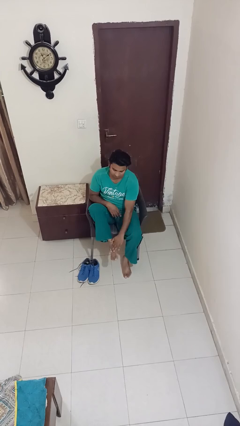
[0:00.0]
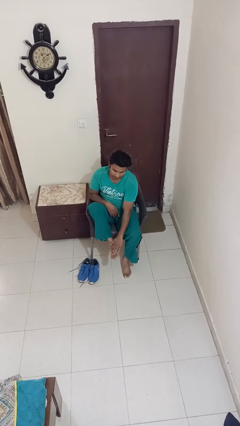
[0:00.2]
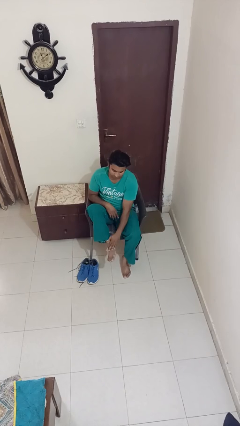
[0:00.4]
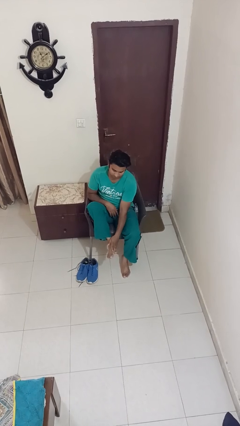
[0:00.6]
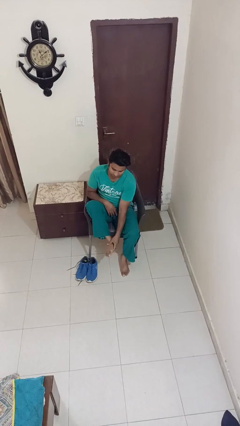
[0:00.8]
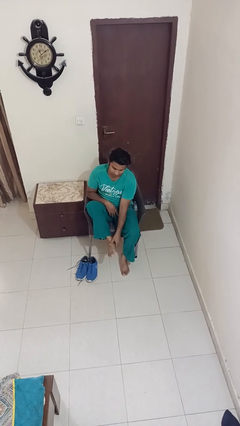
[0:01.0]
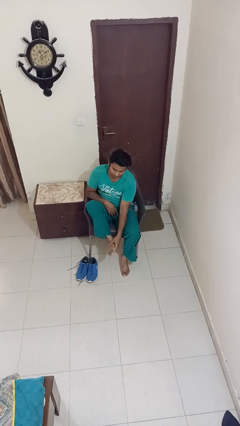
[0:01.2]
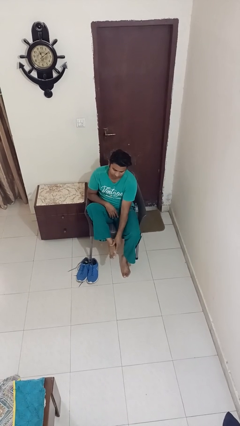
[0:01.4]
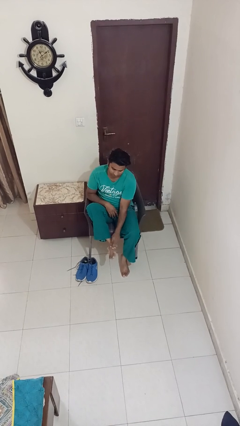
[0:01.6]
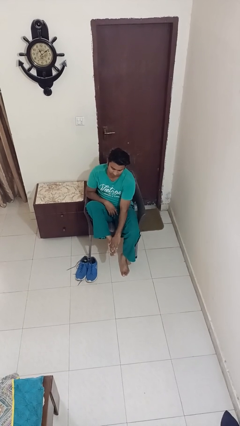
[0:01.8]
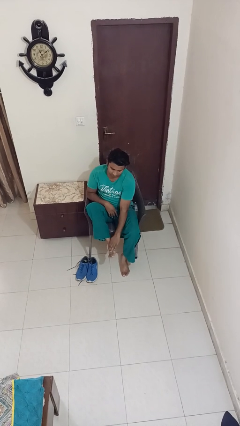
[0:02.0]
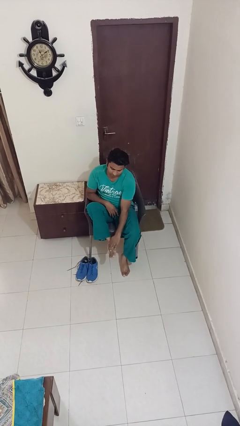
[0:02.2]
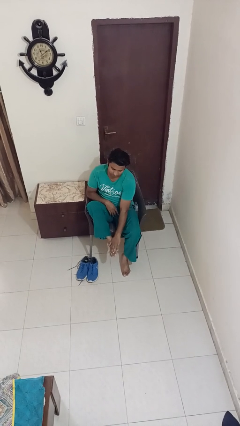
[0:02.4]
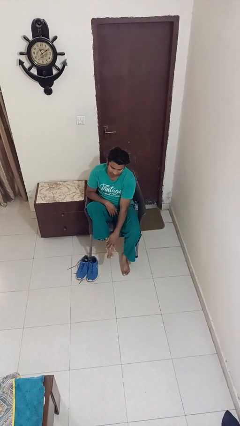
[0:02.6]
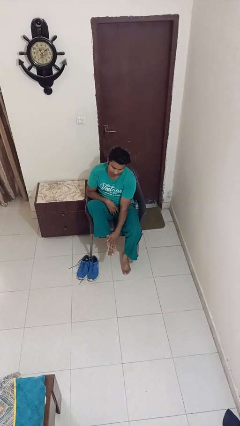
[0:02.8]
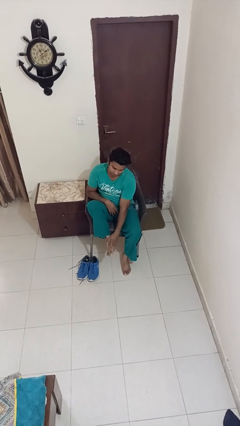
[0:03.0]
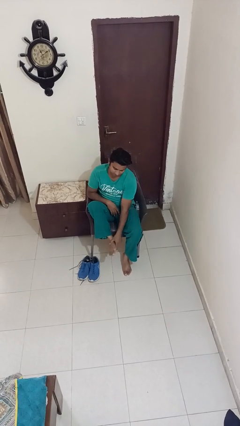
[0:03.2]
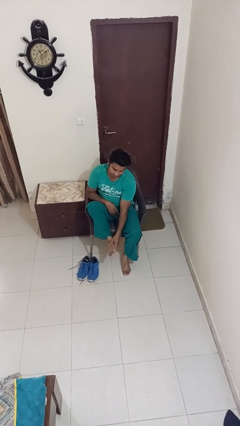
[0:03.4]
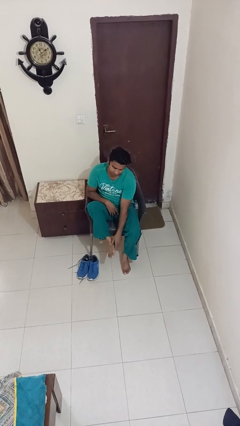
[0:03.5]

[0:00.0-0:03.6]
person rubs foot

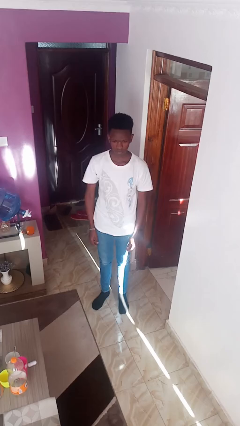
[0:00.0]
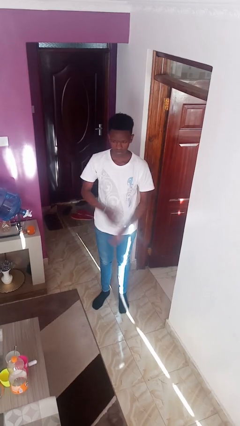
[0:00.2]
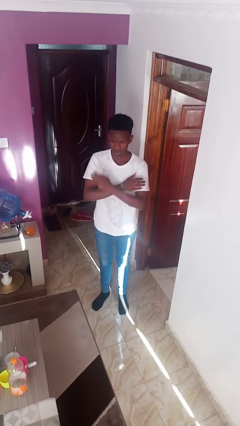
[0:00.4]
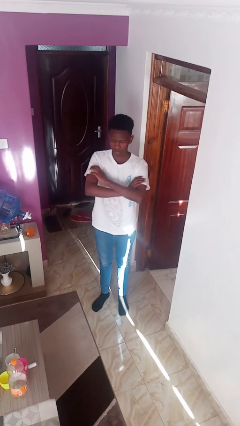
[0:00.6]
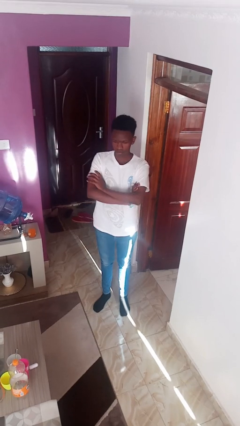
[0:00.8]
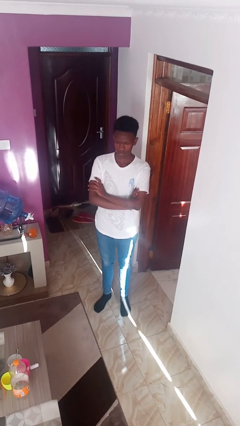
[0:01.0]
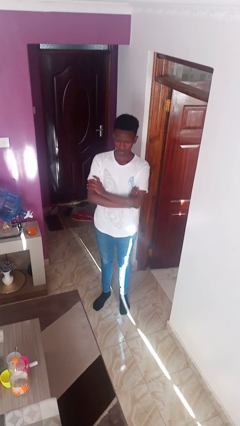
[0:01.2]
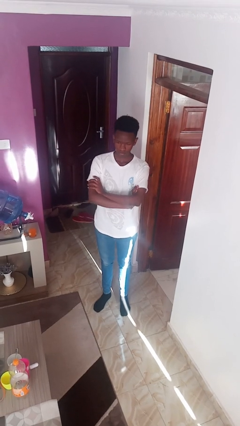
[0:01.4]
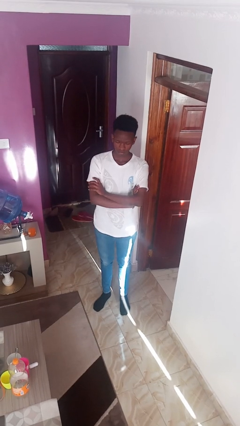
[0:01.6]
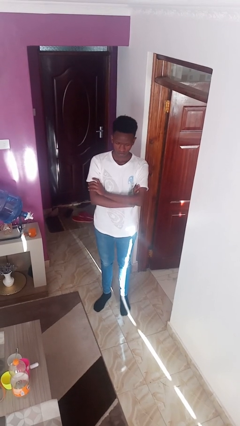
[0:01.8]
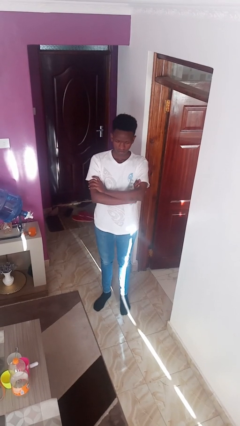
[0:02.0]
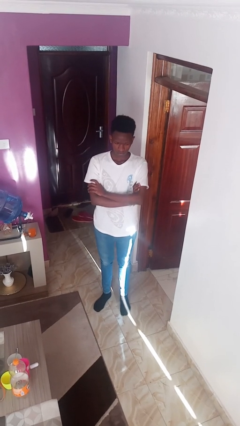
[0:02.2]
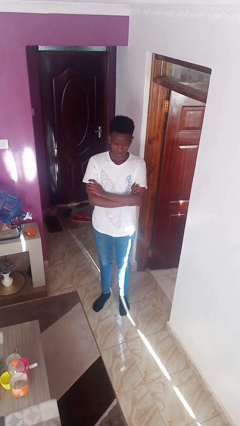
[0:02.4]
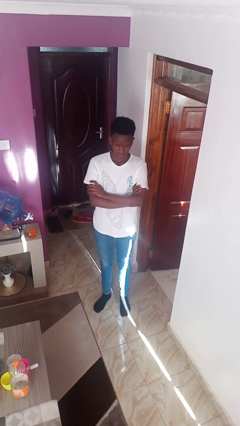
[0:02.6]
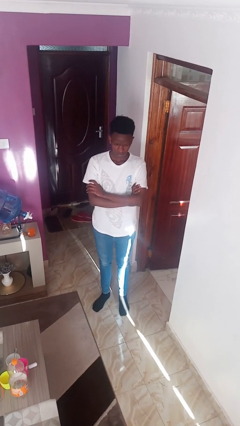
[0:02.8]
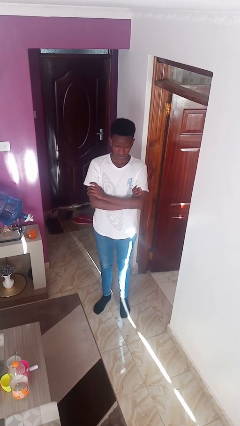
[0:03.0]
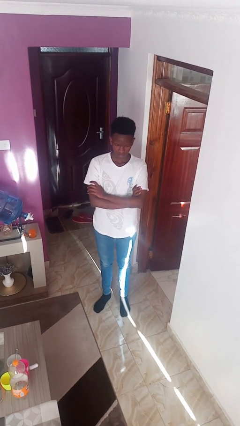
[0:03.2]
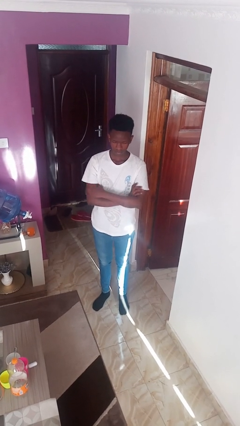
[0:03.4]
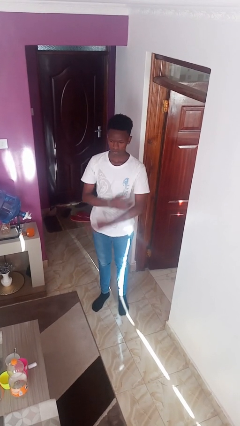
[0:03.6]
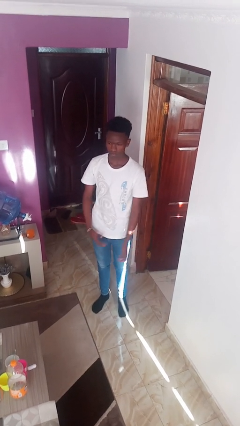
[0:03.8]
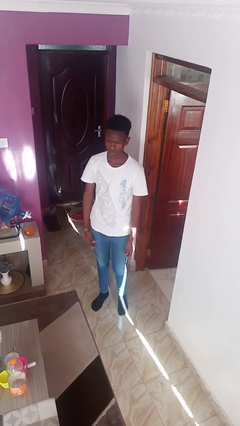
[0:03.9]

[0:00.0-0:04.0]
person crosses arms

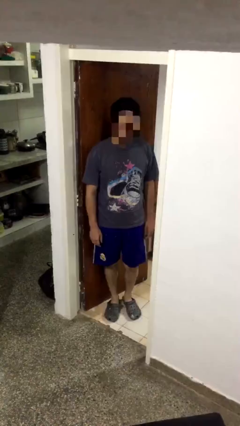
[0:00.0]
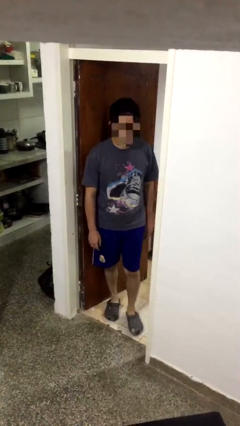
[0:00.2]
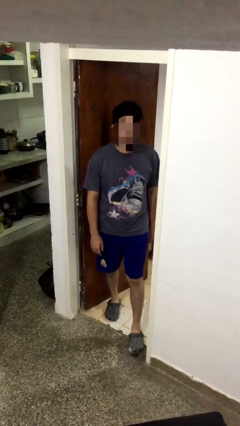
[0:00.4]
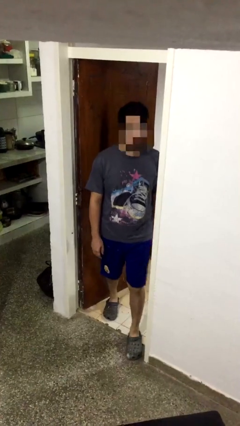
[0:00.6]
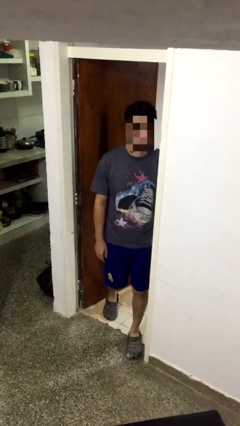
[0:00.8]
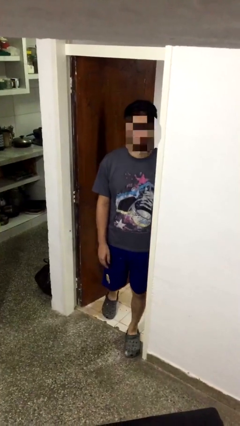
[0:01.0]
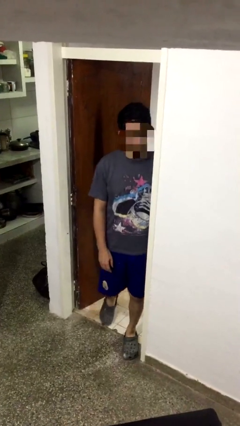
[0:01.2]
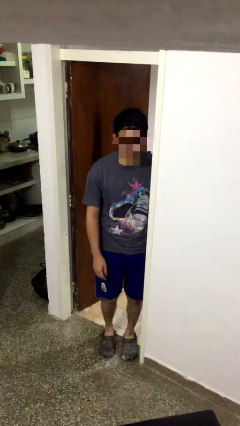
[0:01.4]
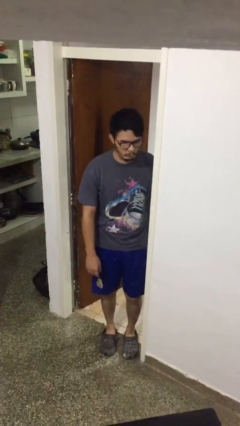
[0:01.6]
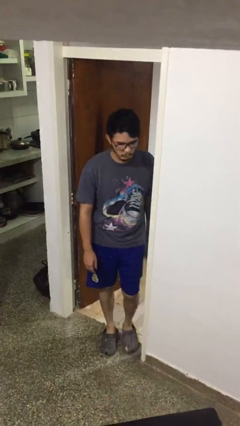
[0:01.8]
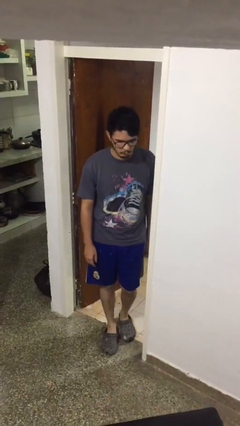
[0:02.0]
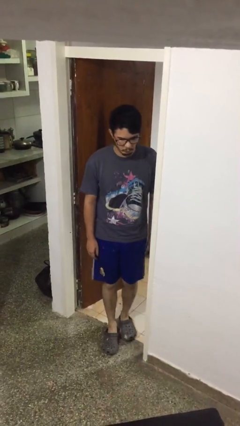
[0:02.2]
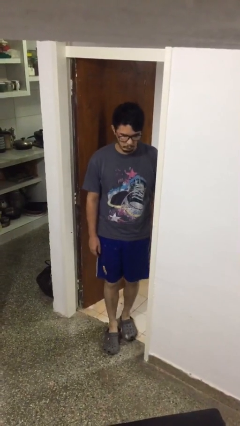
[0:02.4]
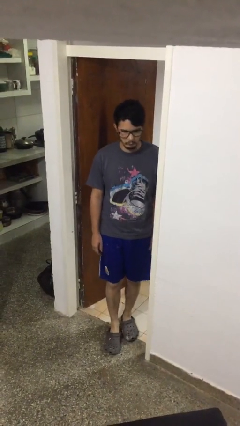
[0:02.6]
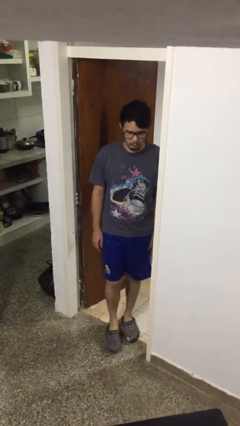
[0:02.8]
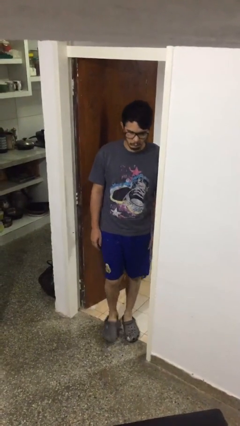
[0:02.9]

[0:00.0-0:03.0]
person bumps into wall

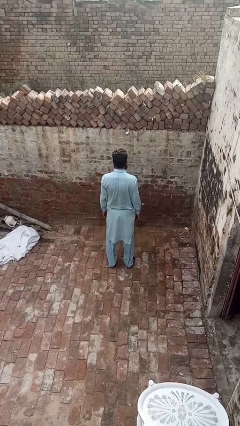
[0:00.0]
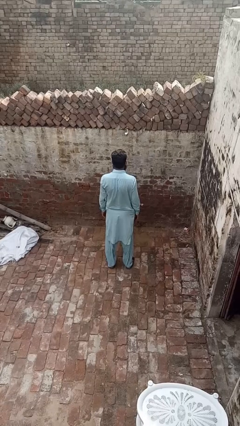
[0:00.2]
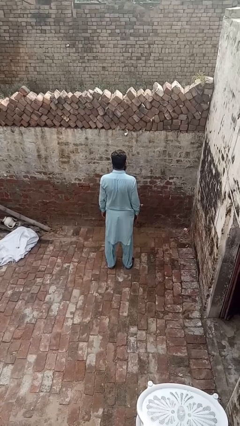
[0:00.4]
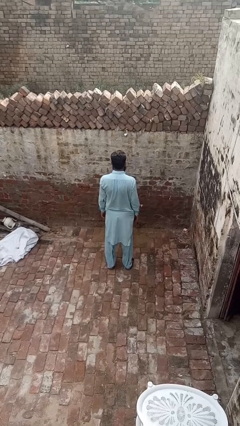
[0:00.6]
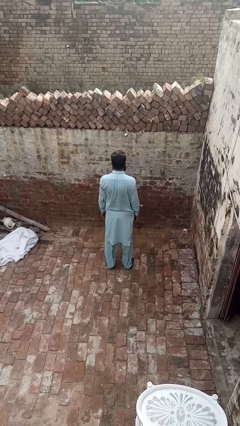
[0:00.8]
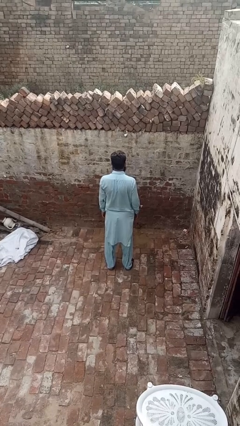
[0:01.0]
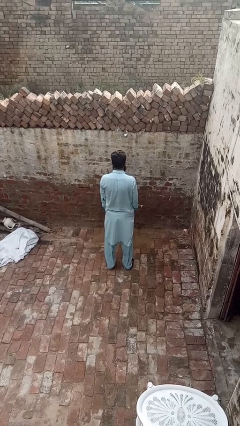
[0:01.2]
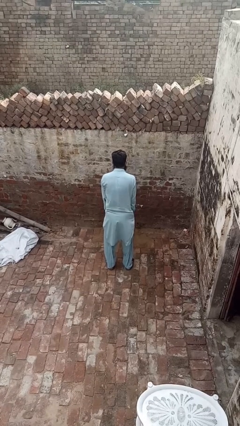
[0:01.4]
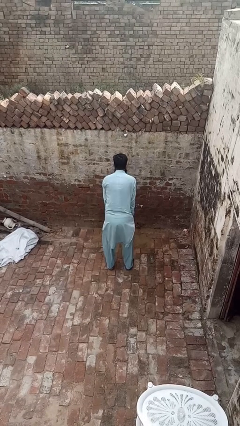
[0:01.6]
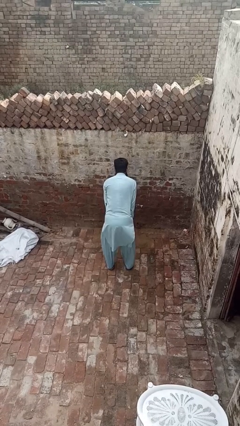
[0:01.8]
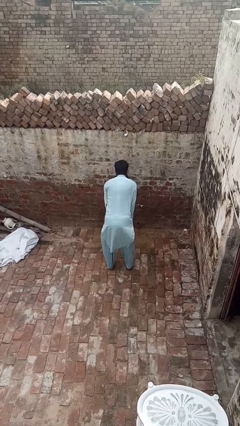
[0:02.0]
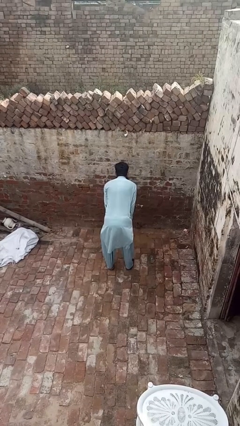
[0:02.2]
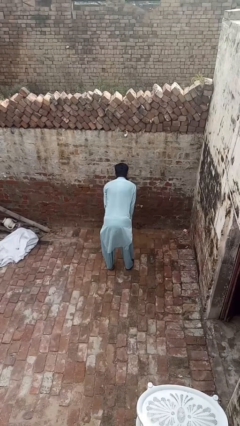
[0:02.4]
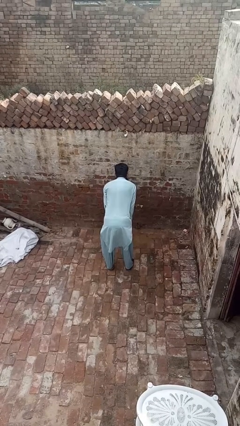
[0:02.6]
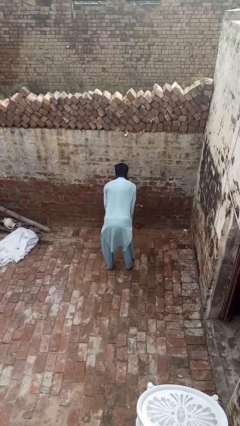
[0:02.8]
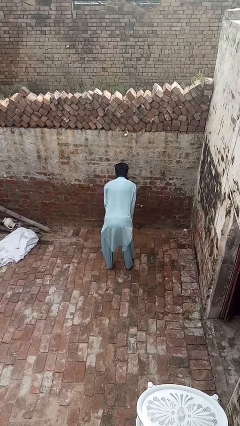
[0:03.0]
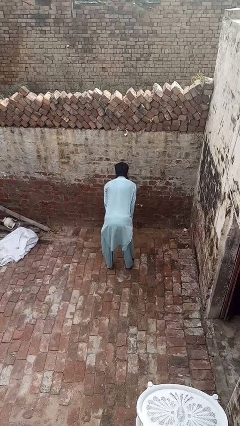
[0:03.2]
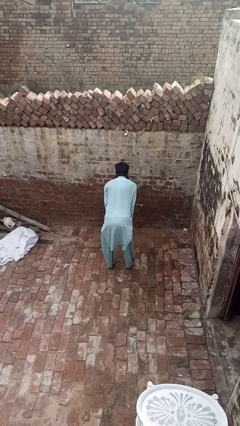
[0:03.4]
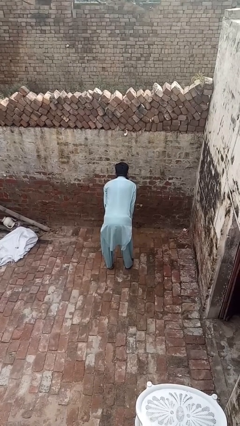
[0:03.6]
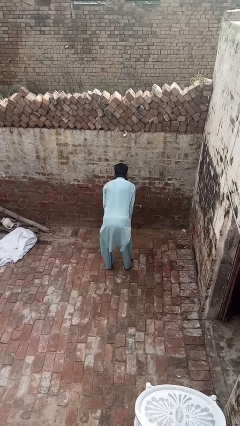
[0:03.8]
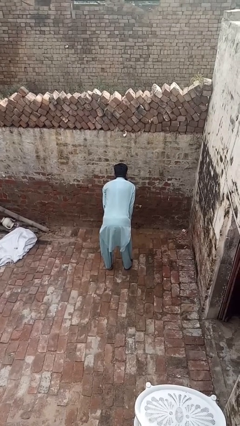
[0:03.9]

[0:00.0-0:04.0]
person slaps hands on thighs

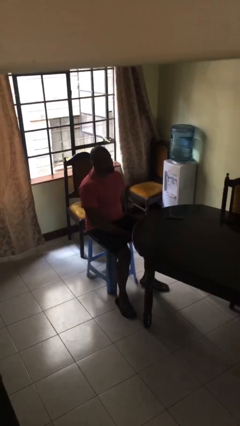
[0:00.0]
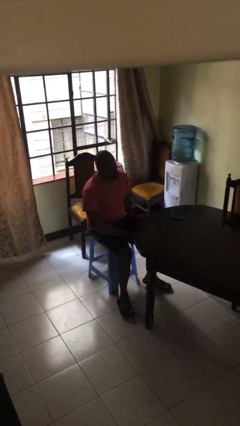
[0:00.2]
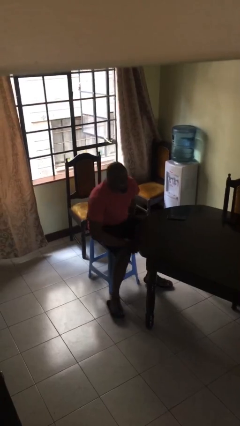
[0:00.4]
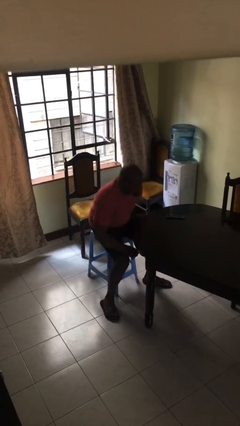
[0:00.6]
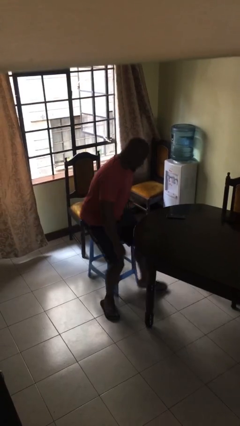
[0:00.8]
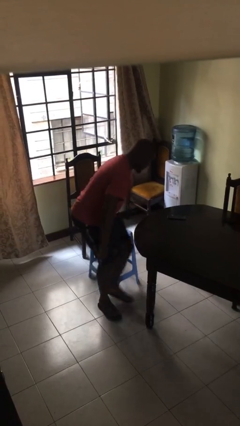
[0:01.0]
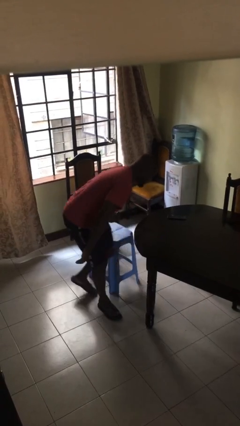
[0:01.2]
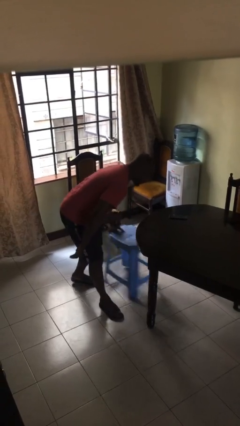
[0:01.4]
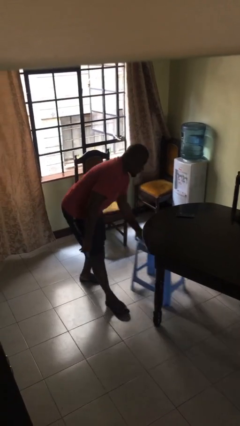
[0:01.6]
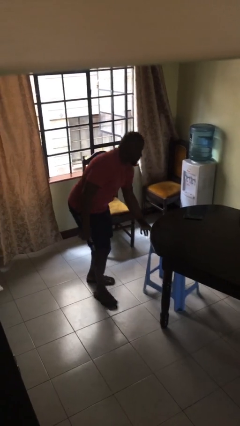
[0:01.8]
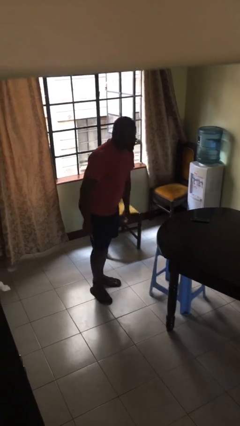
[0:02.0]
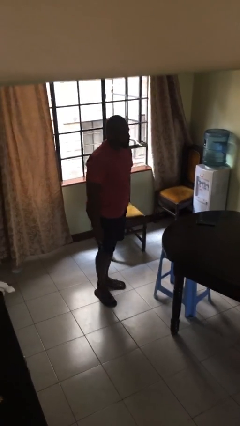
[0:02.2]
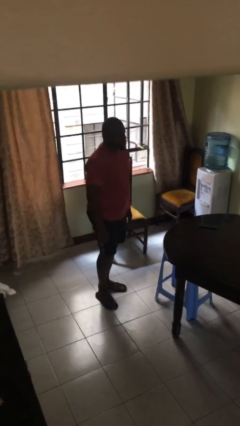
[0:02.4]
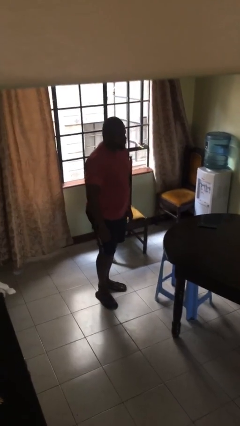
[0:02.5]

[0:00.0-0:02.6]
person stands up
